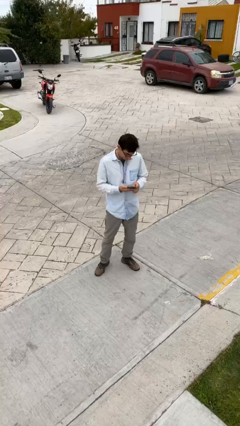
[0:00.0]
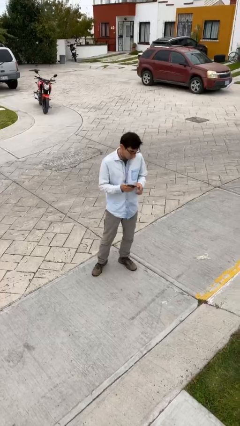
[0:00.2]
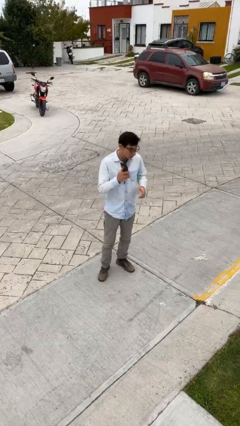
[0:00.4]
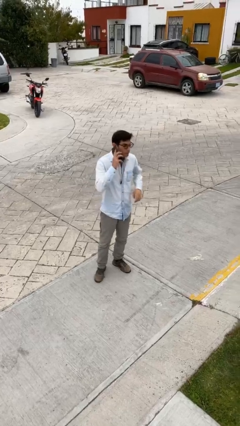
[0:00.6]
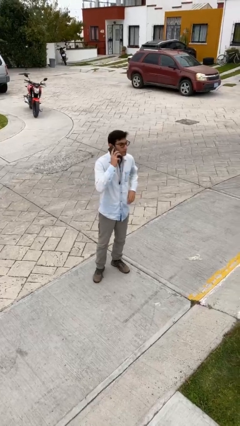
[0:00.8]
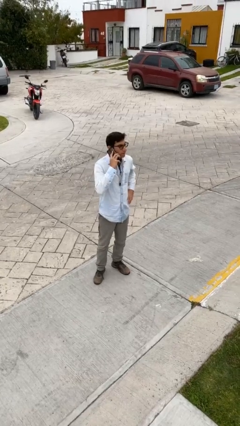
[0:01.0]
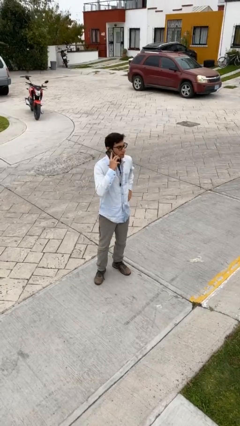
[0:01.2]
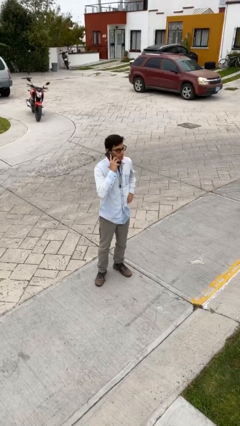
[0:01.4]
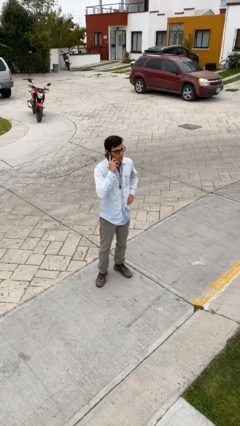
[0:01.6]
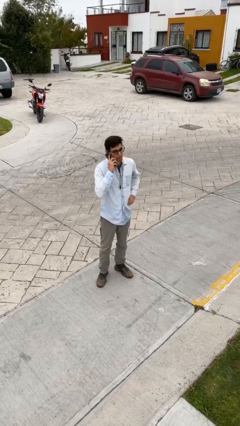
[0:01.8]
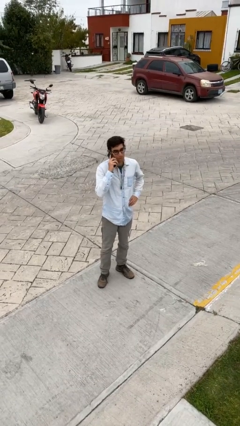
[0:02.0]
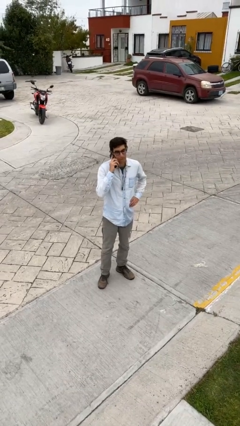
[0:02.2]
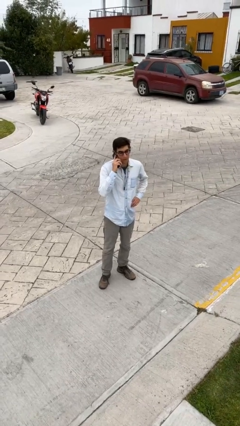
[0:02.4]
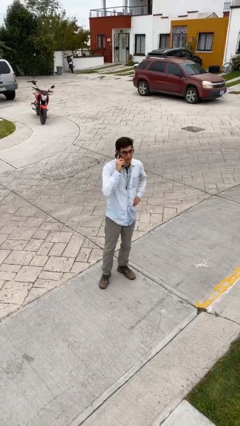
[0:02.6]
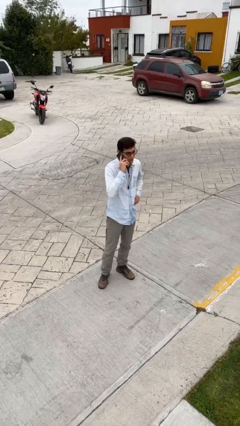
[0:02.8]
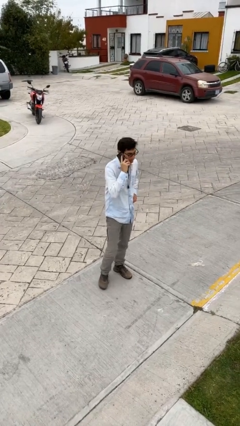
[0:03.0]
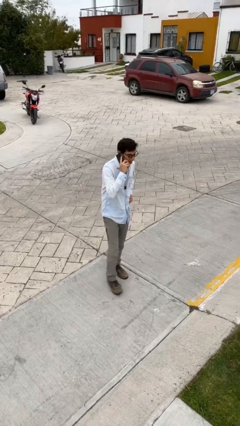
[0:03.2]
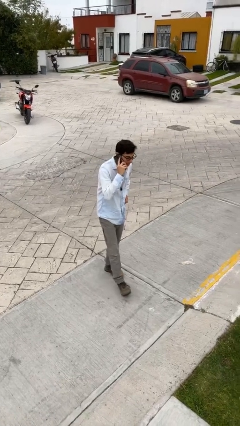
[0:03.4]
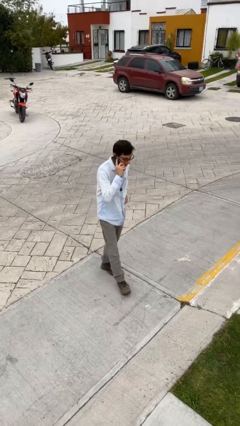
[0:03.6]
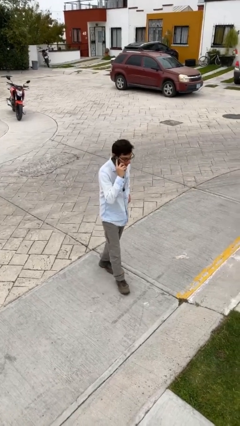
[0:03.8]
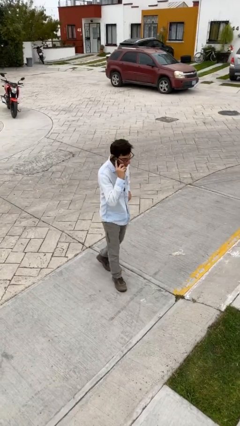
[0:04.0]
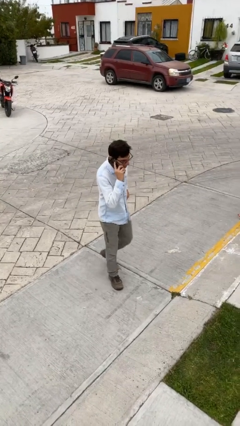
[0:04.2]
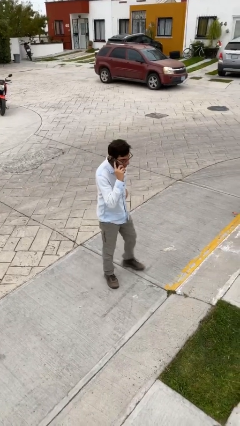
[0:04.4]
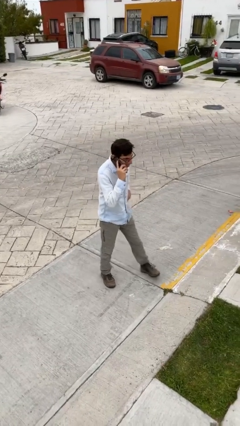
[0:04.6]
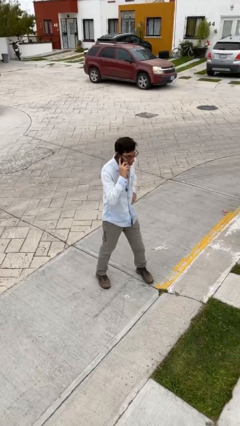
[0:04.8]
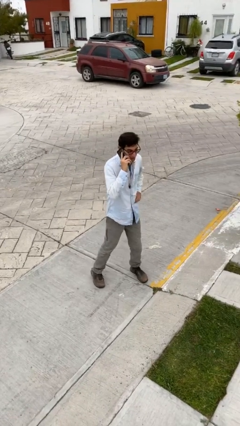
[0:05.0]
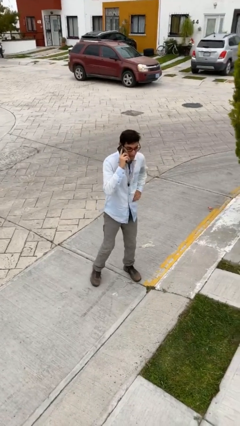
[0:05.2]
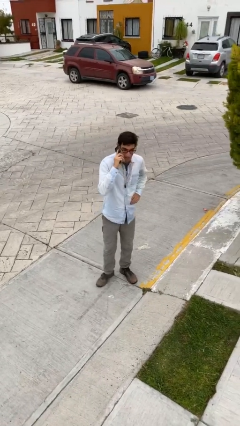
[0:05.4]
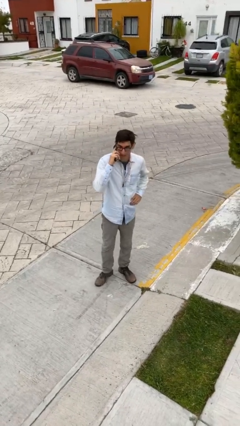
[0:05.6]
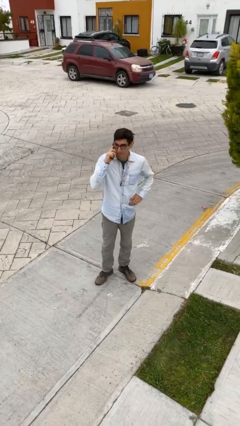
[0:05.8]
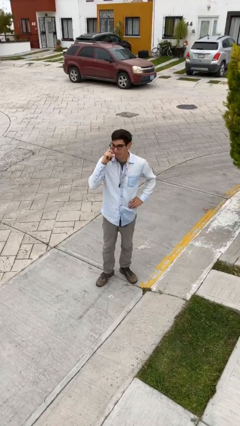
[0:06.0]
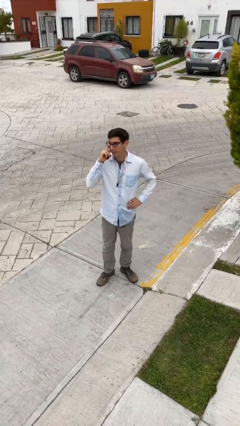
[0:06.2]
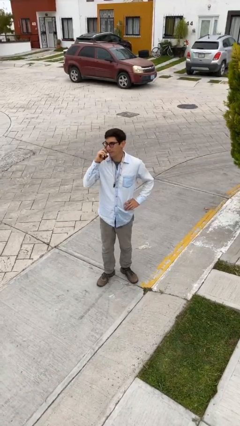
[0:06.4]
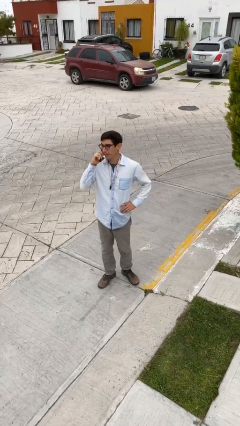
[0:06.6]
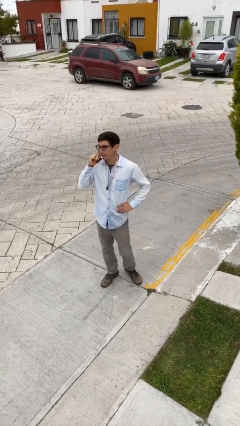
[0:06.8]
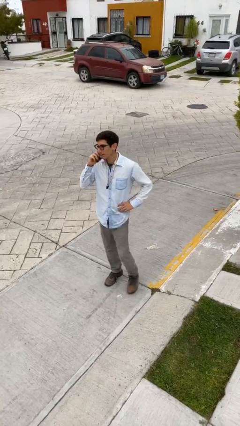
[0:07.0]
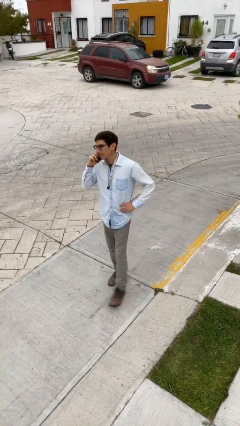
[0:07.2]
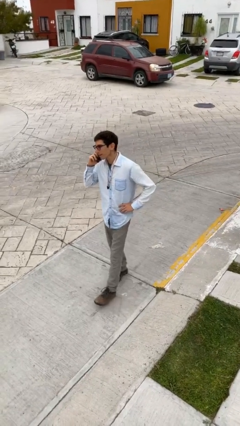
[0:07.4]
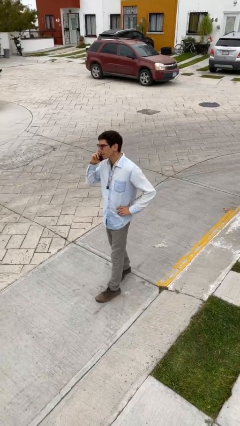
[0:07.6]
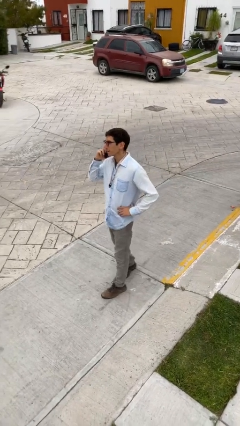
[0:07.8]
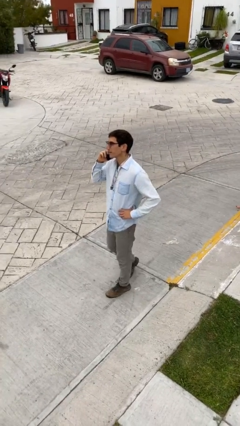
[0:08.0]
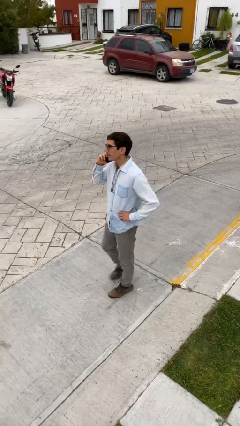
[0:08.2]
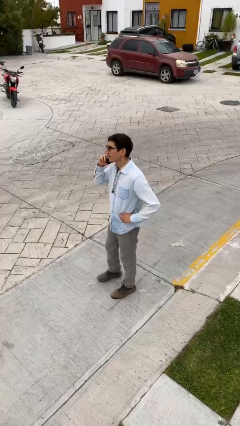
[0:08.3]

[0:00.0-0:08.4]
person talks on phone

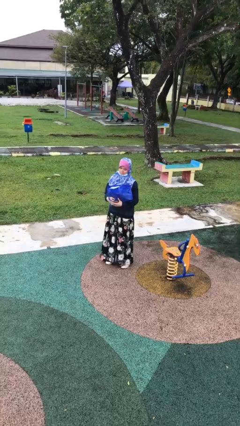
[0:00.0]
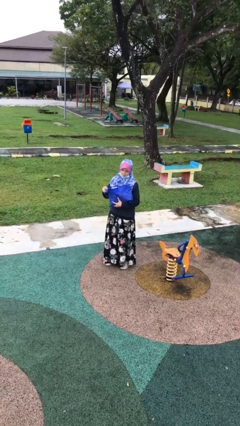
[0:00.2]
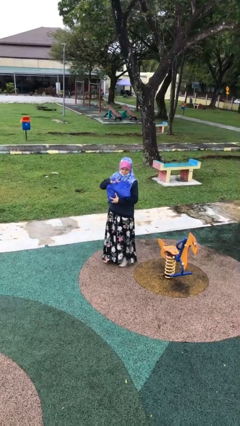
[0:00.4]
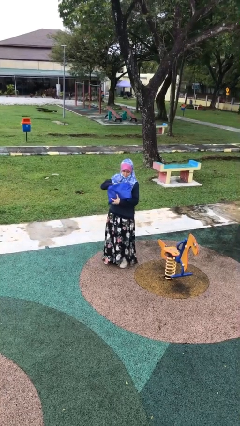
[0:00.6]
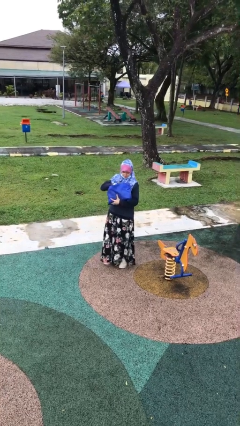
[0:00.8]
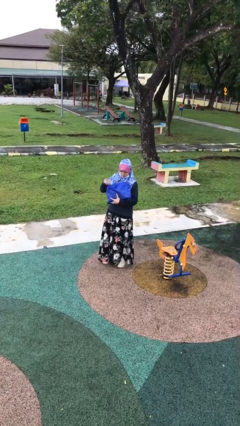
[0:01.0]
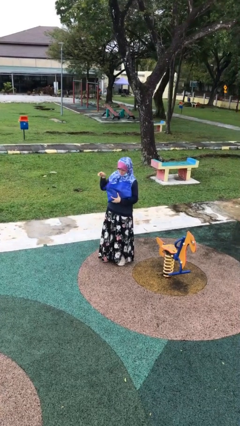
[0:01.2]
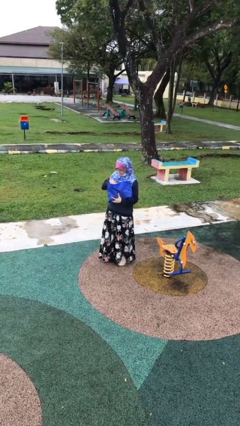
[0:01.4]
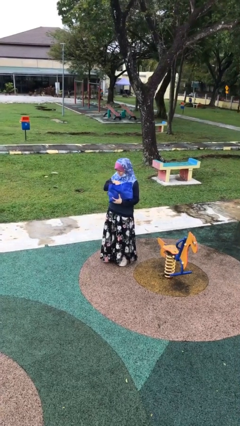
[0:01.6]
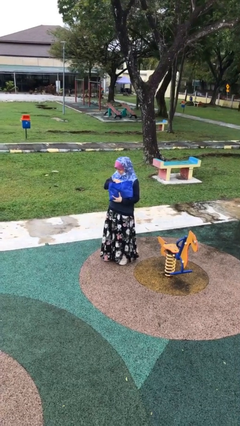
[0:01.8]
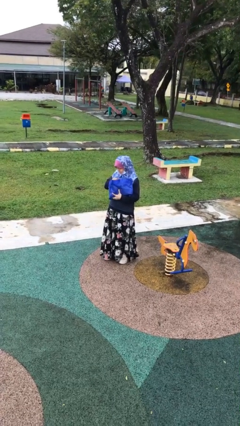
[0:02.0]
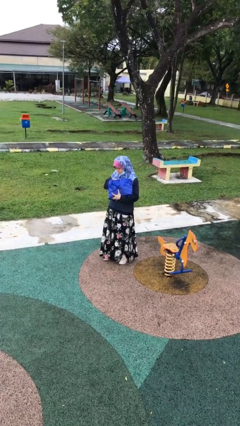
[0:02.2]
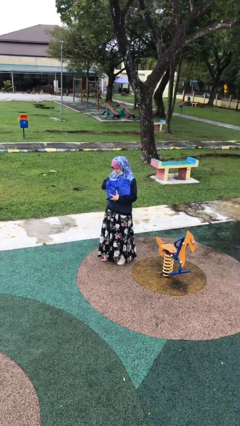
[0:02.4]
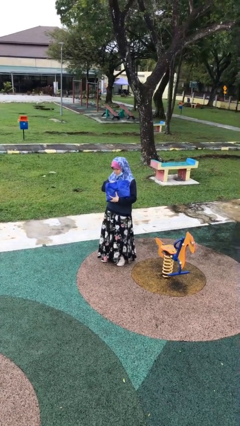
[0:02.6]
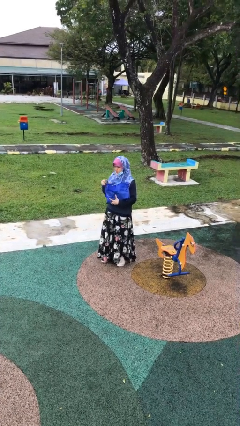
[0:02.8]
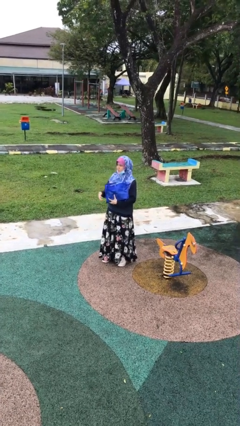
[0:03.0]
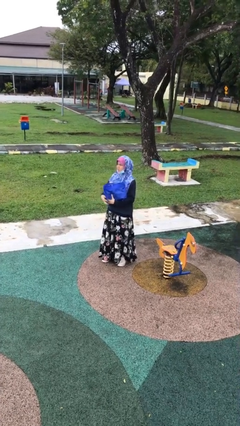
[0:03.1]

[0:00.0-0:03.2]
person searches in bag

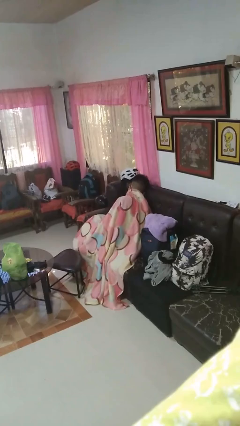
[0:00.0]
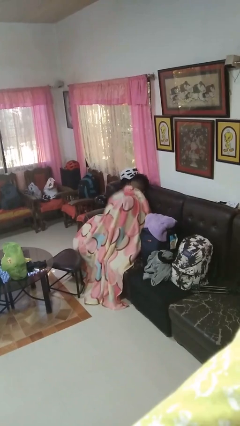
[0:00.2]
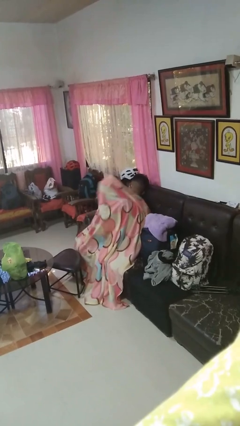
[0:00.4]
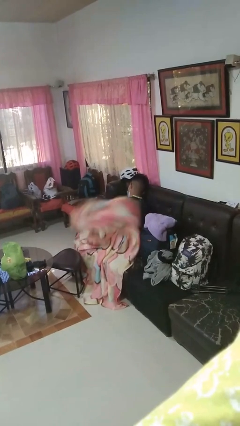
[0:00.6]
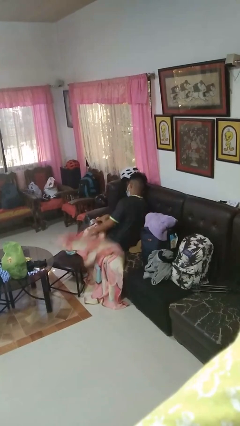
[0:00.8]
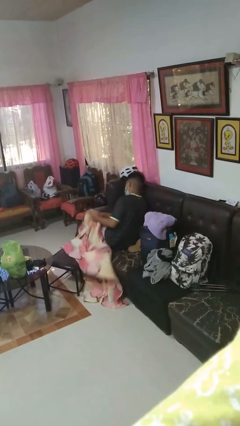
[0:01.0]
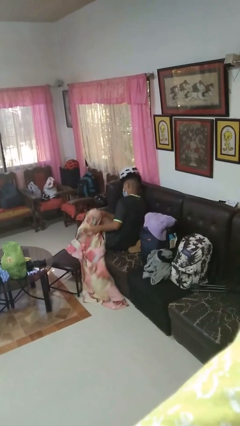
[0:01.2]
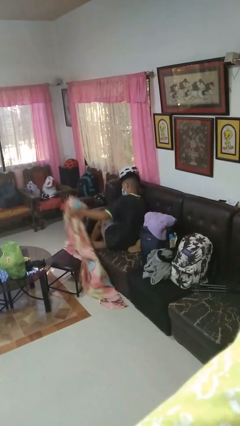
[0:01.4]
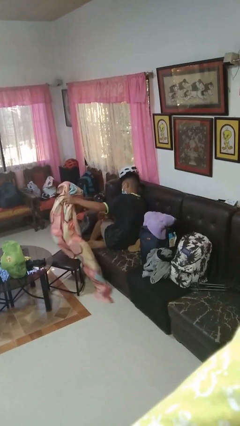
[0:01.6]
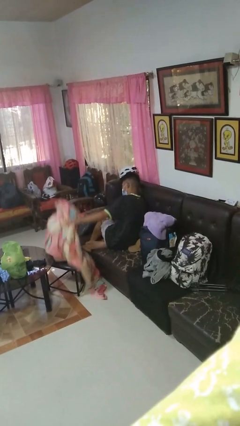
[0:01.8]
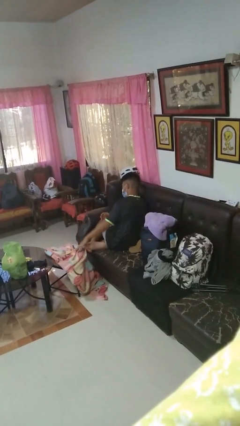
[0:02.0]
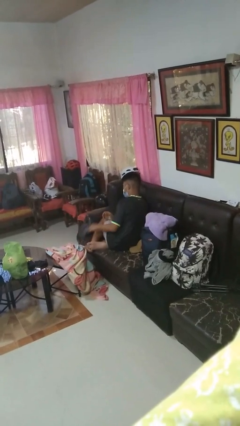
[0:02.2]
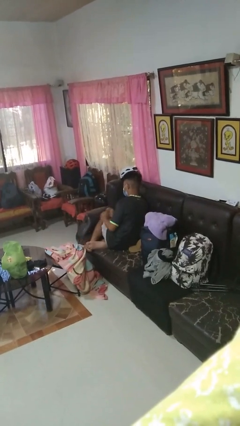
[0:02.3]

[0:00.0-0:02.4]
person uncovers with blanket

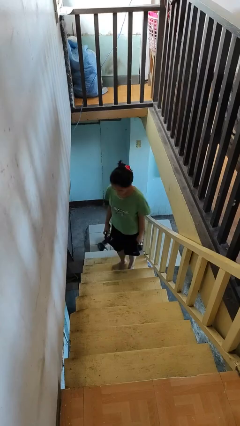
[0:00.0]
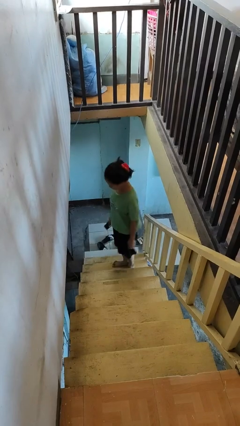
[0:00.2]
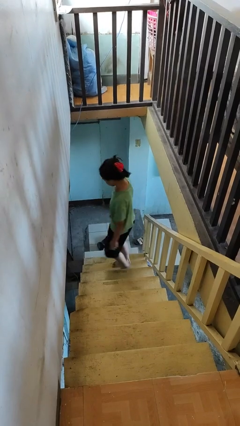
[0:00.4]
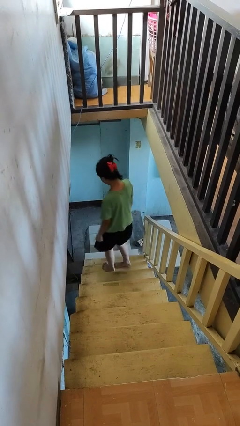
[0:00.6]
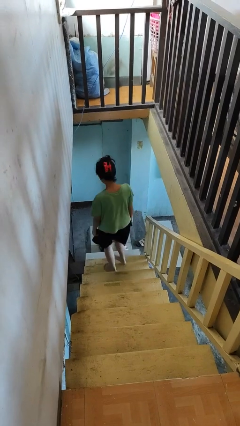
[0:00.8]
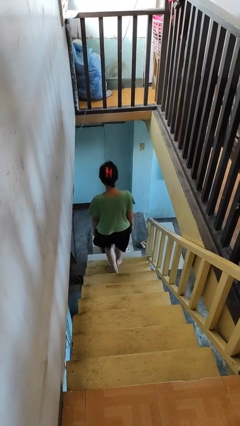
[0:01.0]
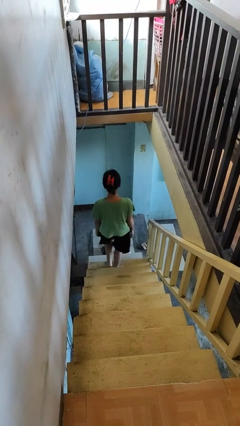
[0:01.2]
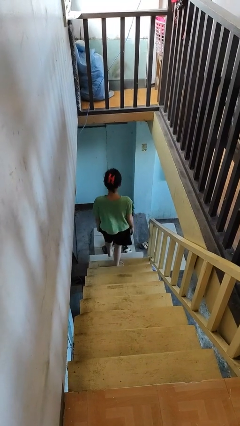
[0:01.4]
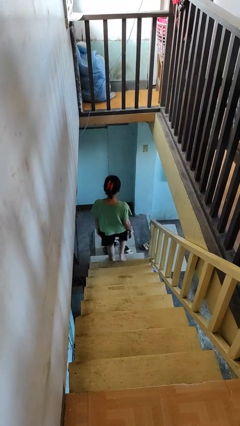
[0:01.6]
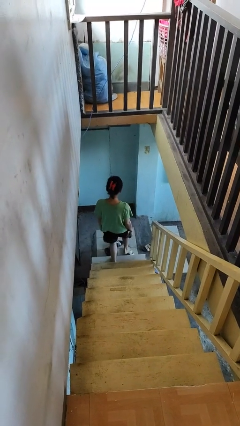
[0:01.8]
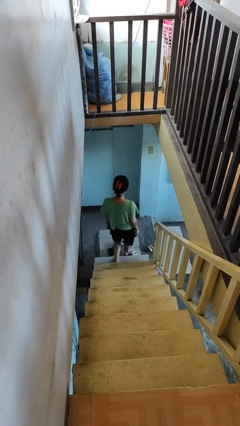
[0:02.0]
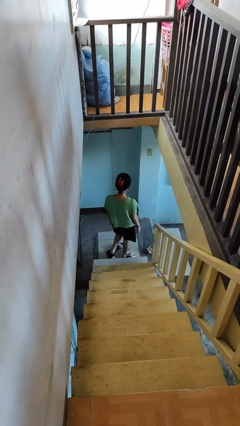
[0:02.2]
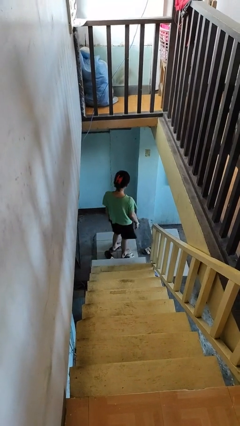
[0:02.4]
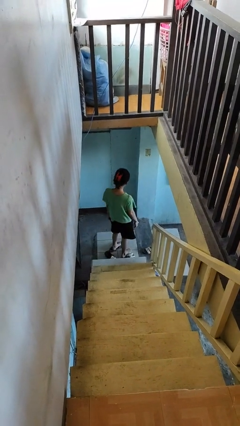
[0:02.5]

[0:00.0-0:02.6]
person climbs down stairs

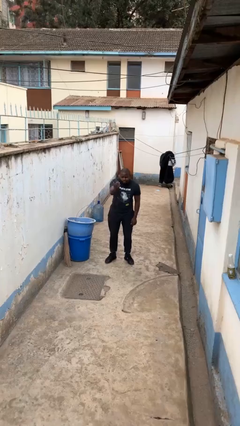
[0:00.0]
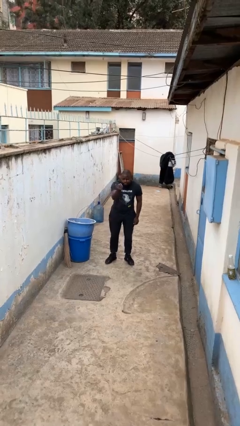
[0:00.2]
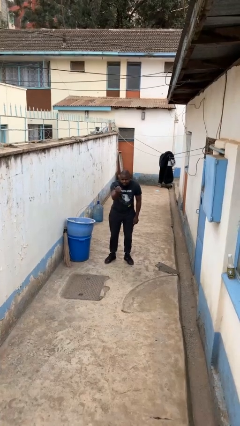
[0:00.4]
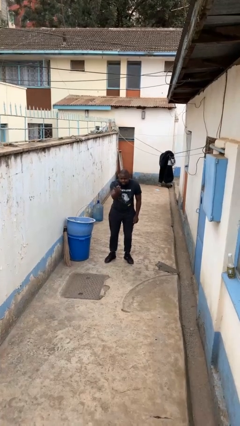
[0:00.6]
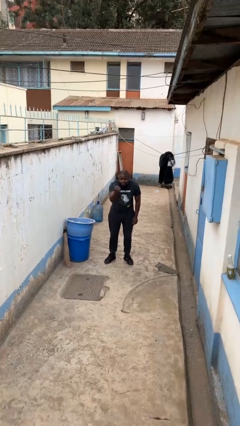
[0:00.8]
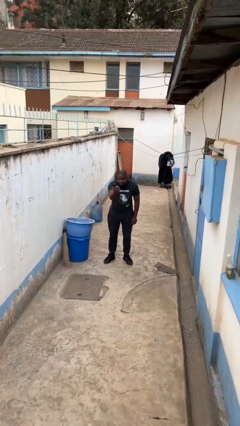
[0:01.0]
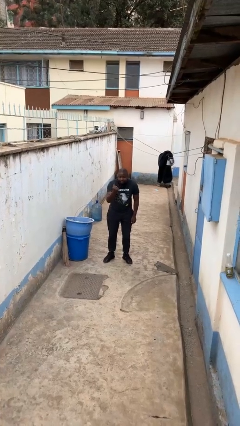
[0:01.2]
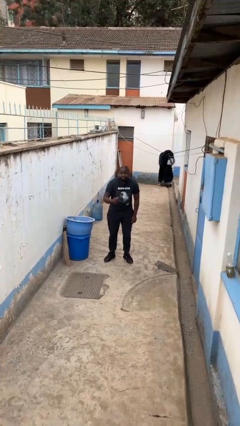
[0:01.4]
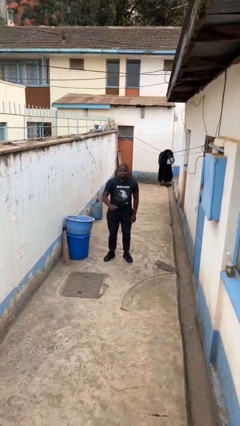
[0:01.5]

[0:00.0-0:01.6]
person gestures come here
